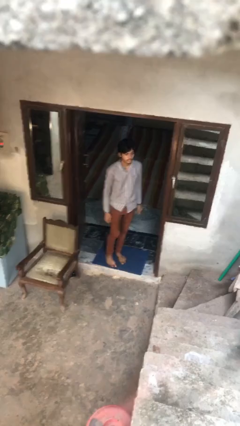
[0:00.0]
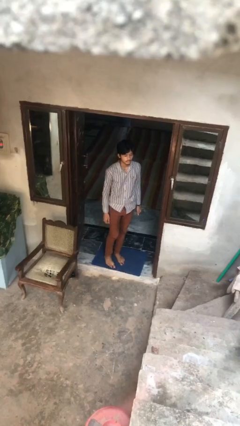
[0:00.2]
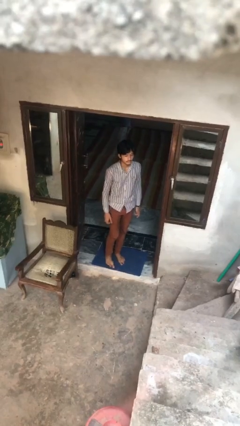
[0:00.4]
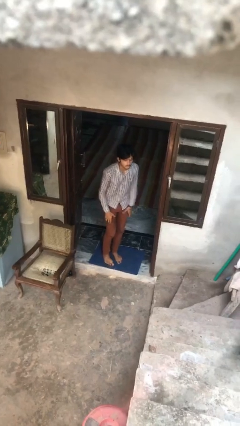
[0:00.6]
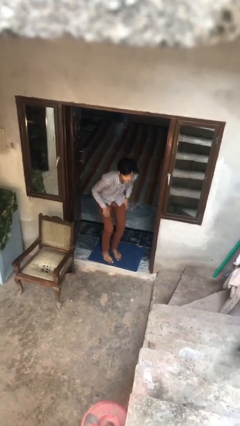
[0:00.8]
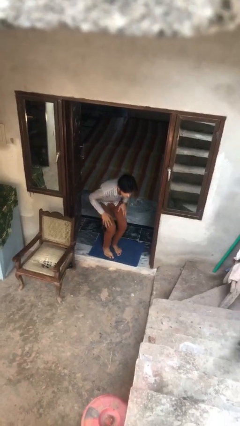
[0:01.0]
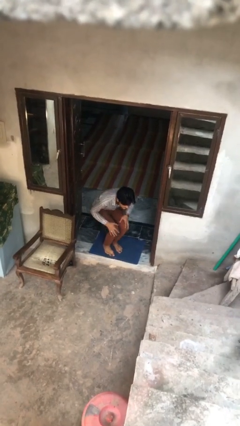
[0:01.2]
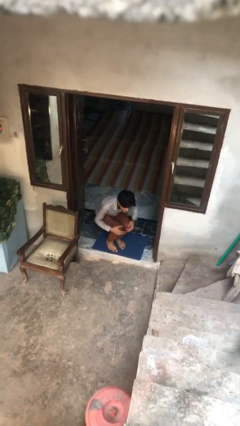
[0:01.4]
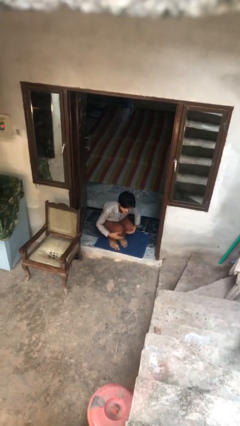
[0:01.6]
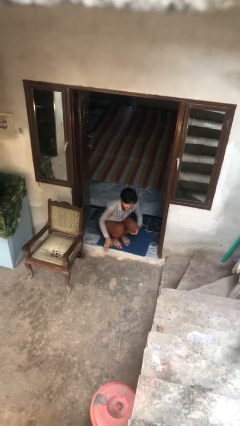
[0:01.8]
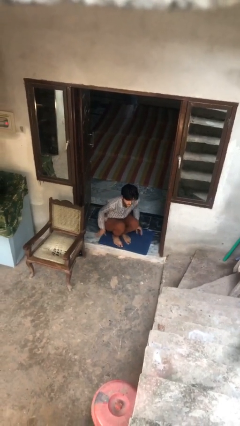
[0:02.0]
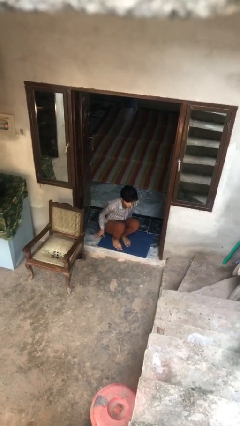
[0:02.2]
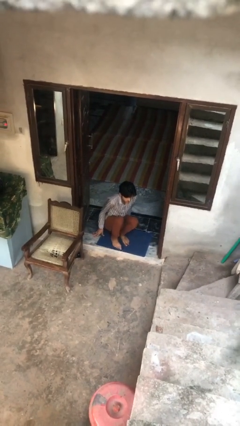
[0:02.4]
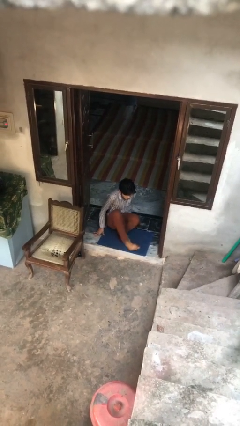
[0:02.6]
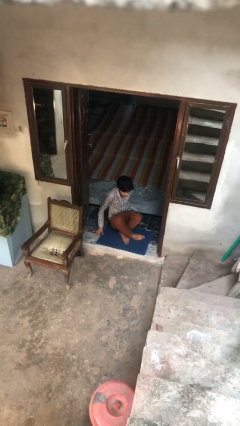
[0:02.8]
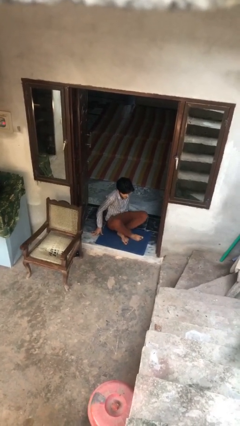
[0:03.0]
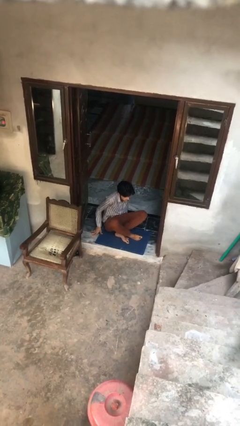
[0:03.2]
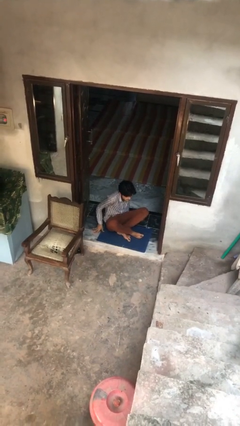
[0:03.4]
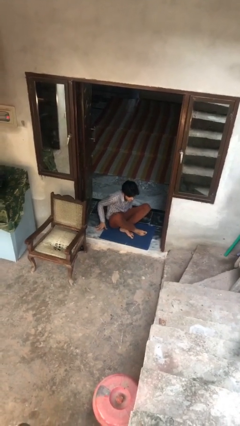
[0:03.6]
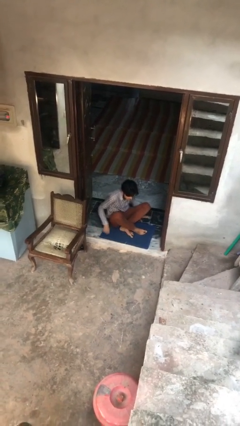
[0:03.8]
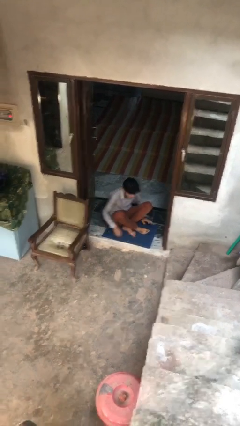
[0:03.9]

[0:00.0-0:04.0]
person sits crisscross

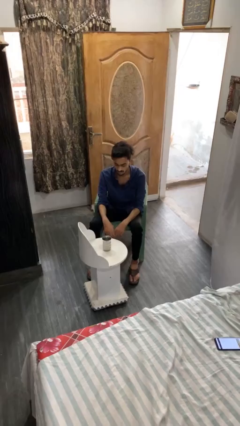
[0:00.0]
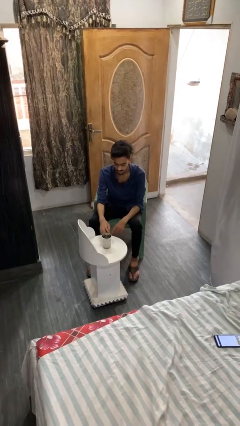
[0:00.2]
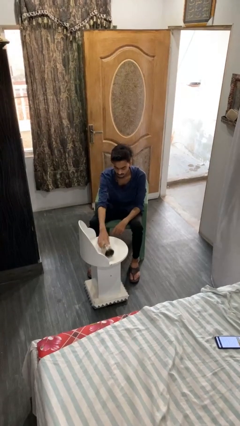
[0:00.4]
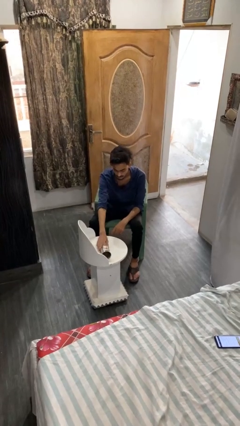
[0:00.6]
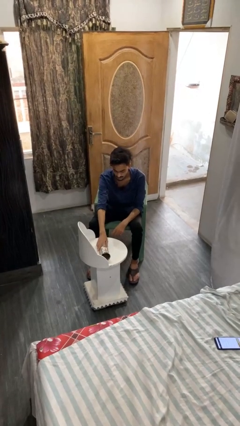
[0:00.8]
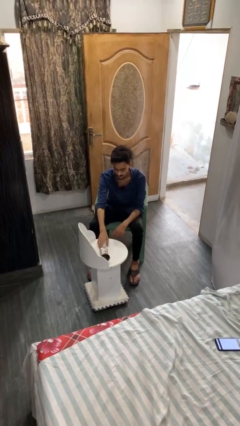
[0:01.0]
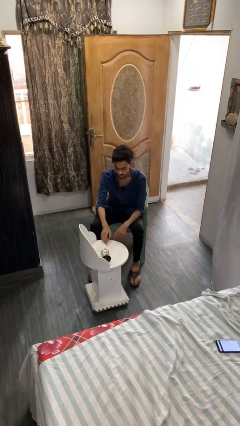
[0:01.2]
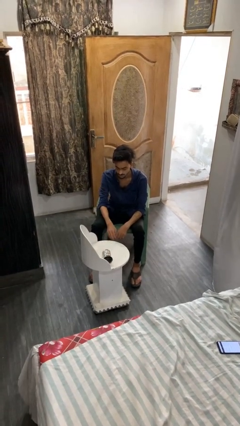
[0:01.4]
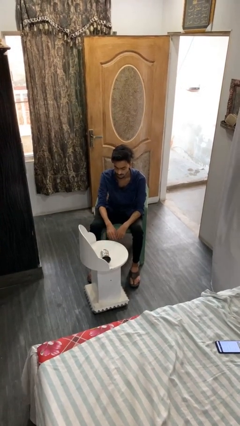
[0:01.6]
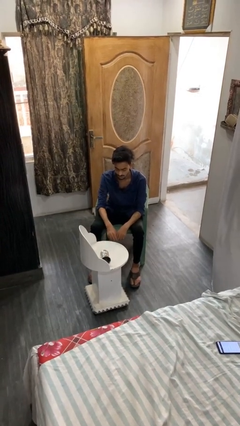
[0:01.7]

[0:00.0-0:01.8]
person knocks over glass

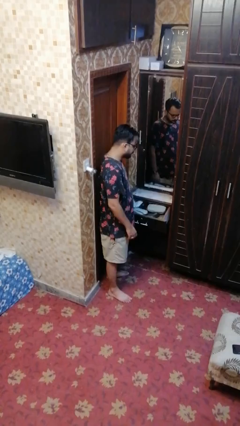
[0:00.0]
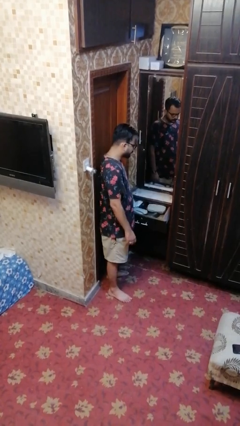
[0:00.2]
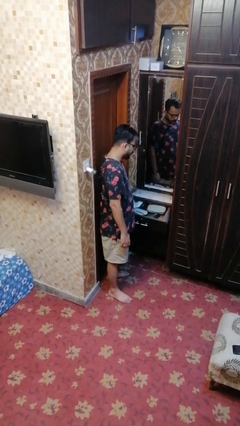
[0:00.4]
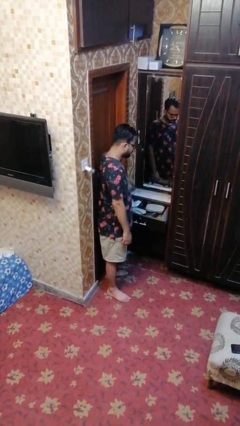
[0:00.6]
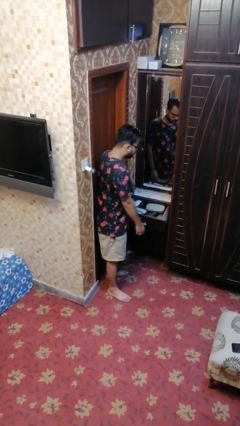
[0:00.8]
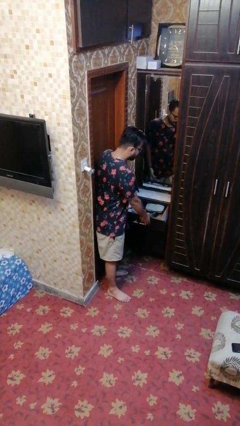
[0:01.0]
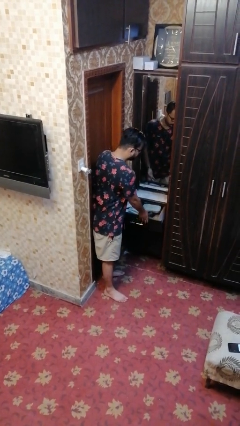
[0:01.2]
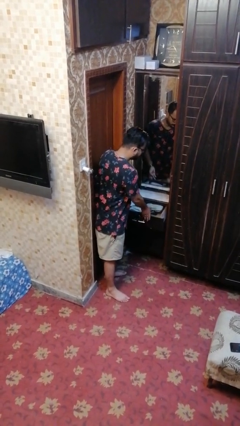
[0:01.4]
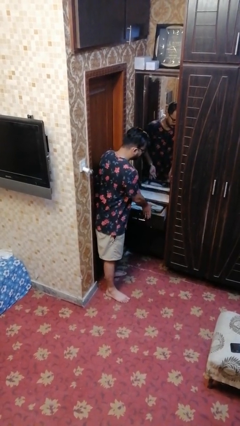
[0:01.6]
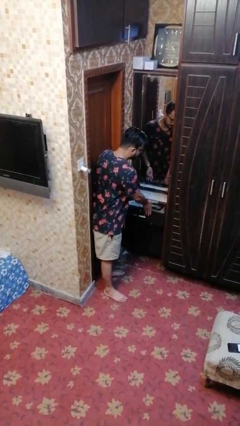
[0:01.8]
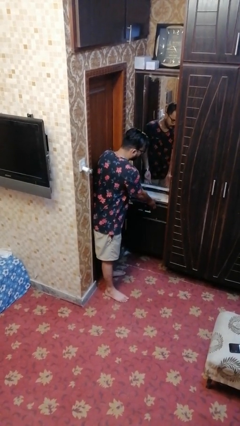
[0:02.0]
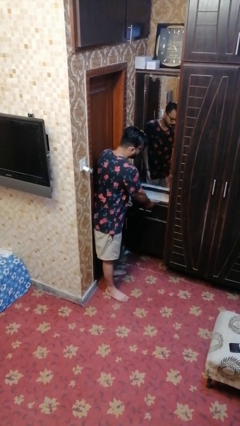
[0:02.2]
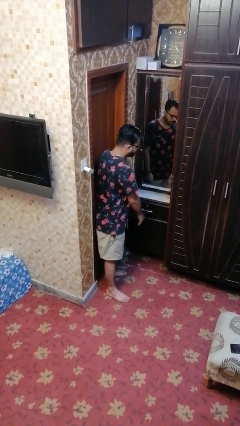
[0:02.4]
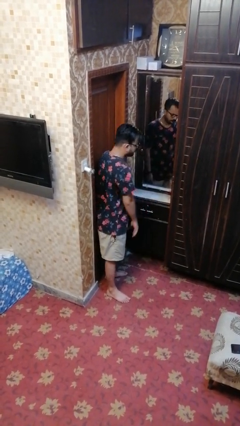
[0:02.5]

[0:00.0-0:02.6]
person closes dresser drawer

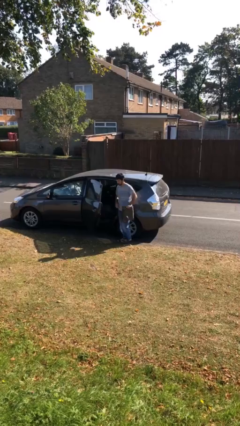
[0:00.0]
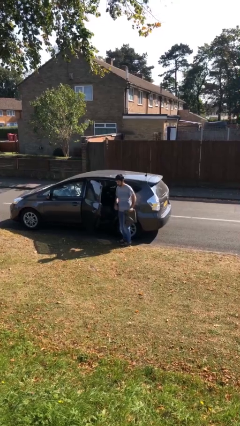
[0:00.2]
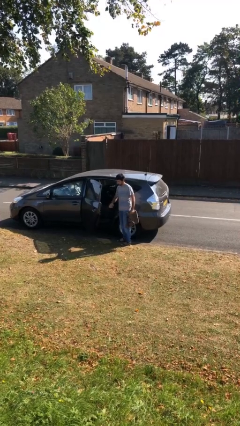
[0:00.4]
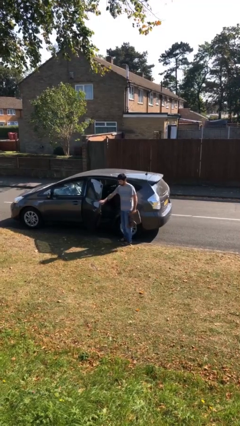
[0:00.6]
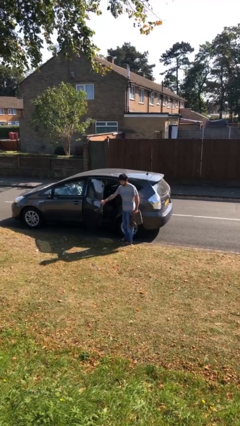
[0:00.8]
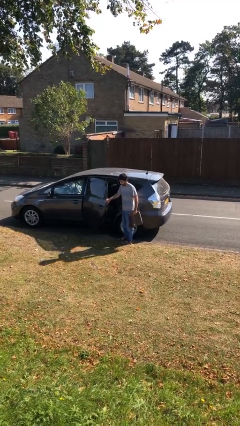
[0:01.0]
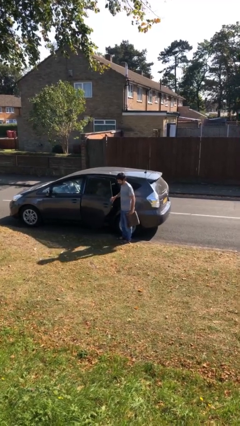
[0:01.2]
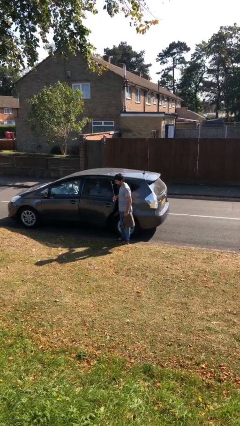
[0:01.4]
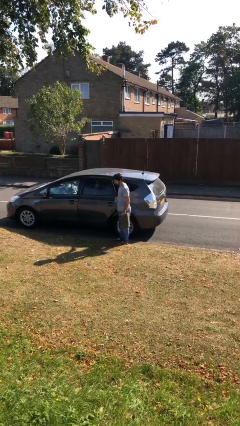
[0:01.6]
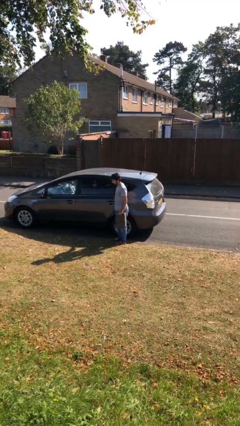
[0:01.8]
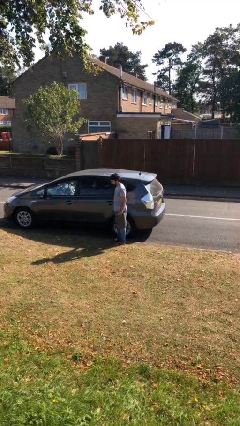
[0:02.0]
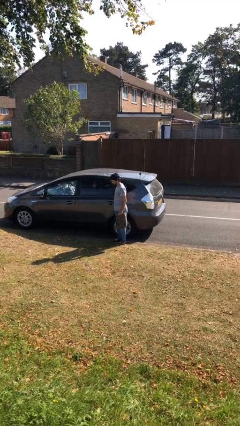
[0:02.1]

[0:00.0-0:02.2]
person closes car door

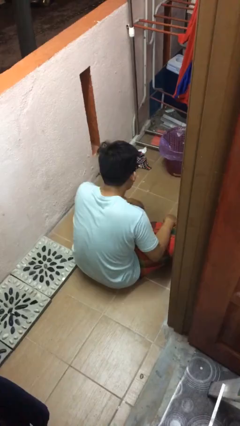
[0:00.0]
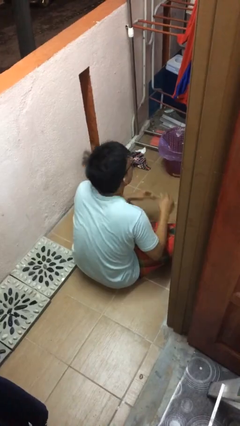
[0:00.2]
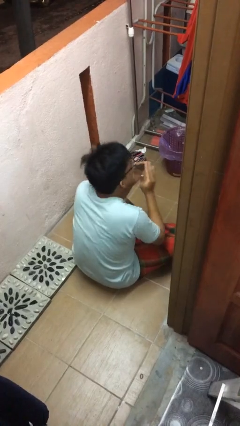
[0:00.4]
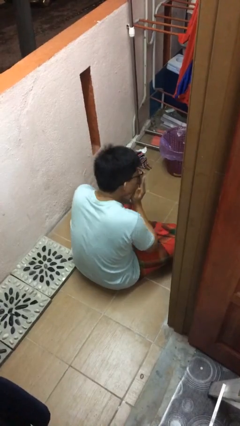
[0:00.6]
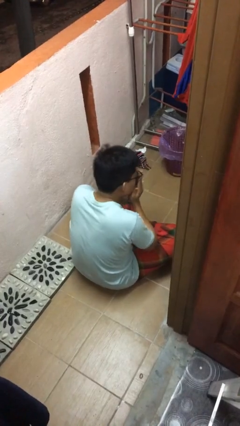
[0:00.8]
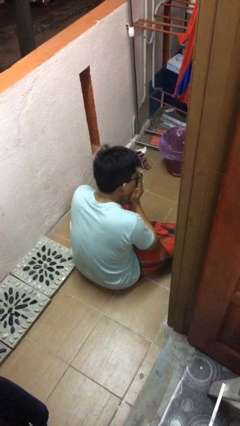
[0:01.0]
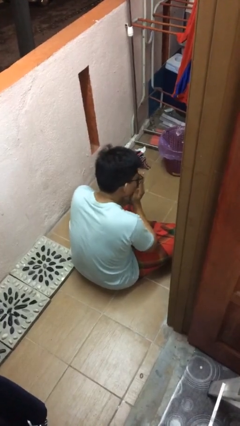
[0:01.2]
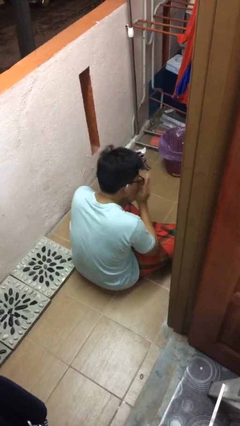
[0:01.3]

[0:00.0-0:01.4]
person sneezes into hand

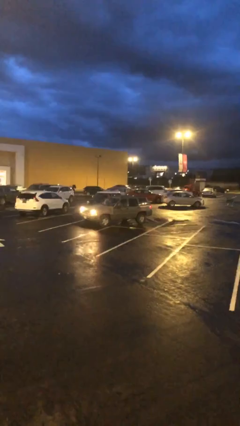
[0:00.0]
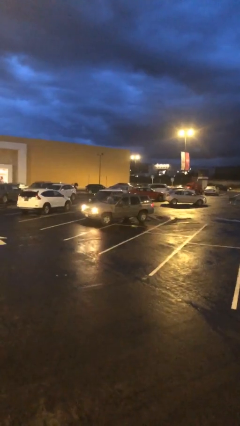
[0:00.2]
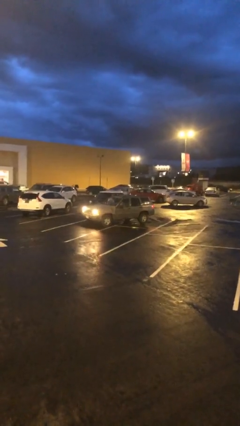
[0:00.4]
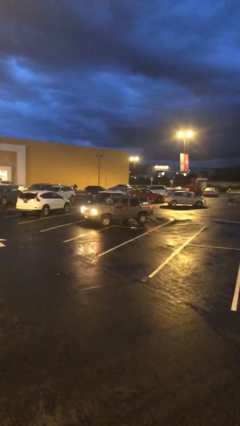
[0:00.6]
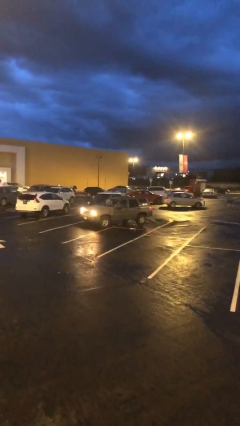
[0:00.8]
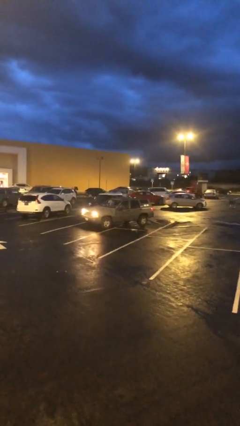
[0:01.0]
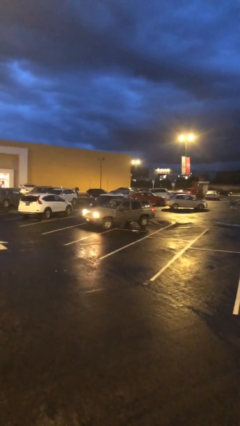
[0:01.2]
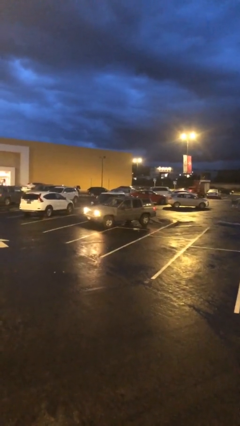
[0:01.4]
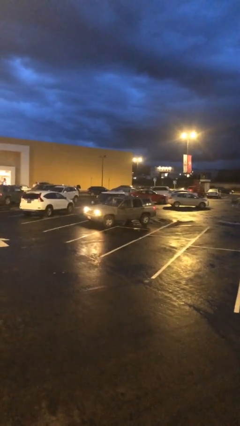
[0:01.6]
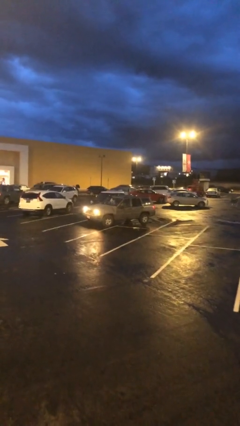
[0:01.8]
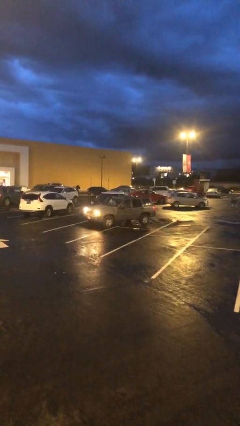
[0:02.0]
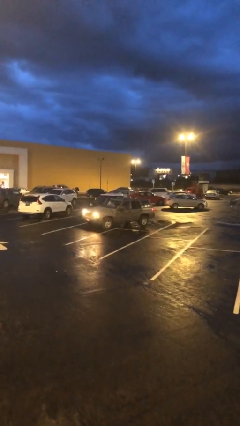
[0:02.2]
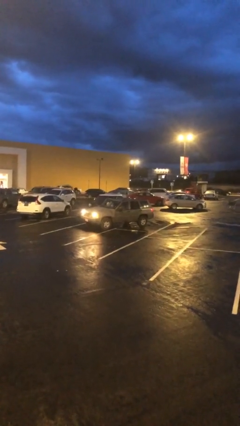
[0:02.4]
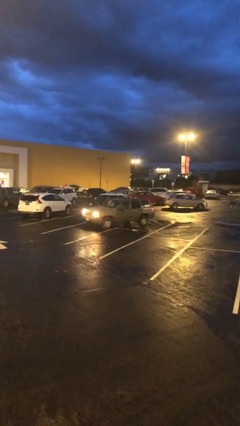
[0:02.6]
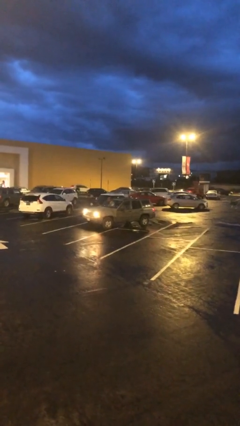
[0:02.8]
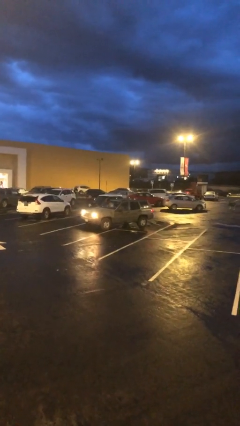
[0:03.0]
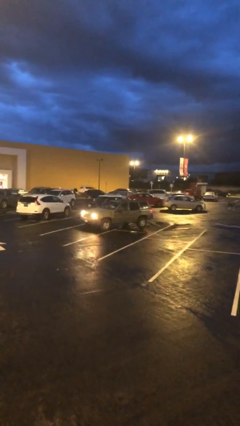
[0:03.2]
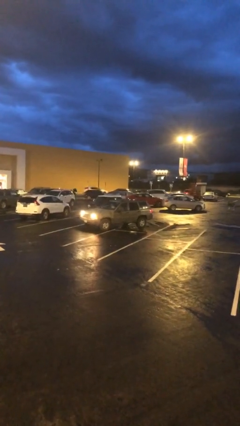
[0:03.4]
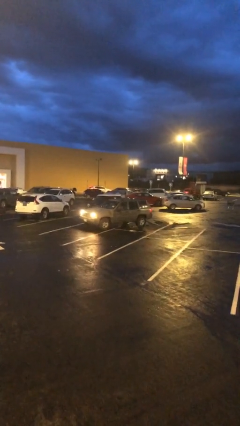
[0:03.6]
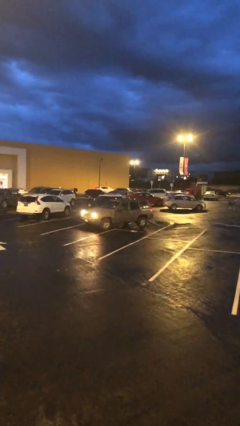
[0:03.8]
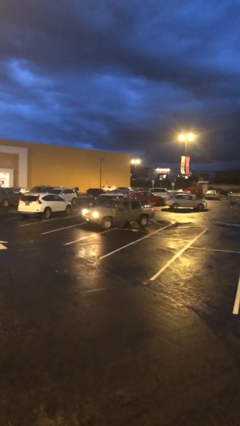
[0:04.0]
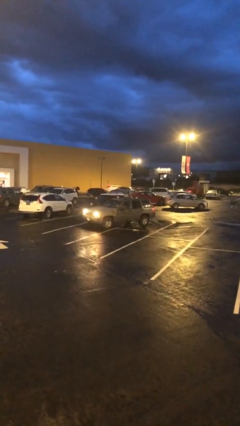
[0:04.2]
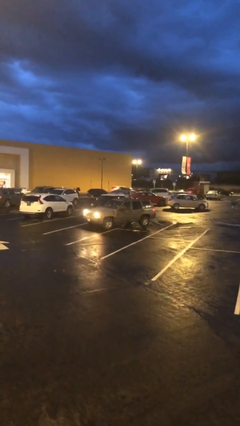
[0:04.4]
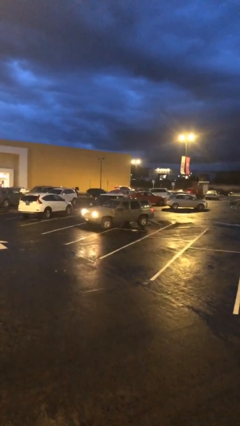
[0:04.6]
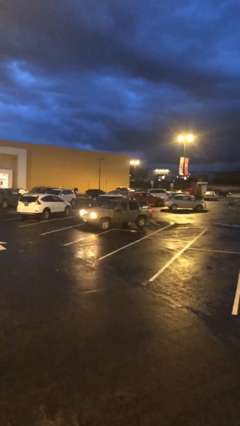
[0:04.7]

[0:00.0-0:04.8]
car picks up person

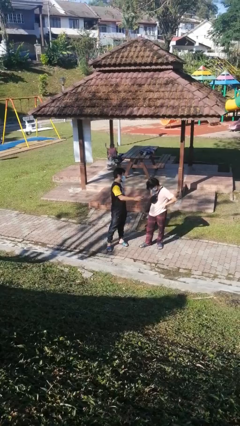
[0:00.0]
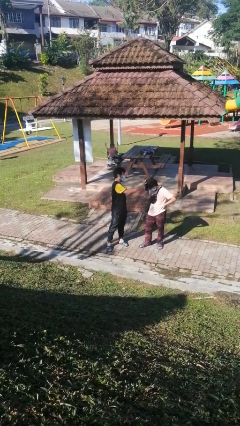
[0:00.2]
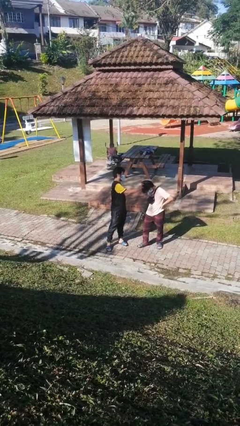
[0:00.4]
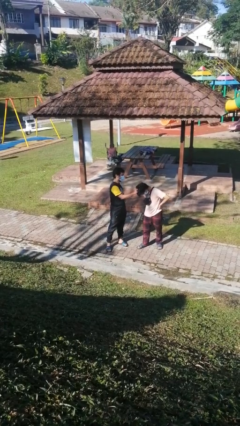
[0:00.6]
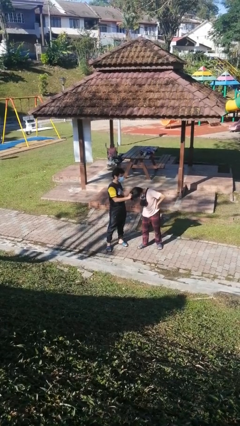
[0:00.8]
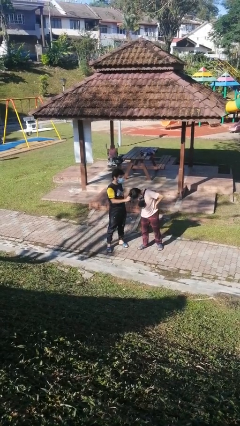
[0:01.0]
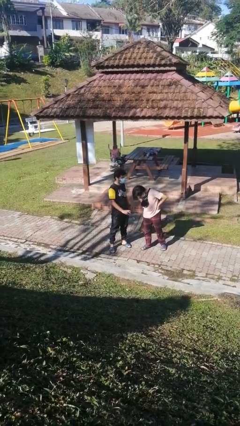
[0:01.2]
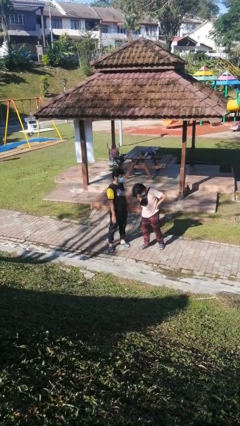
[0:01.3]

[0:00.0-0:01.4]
person grabs person by hair
